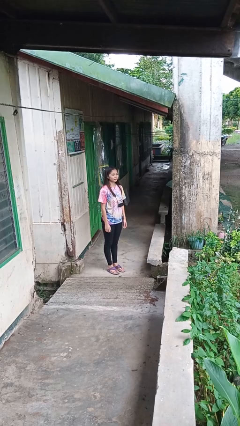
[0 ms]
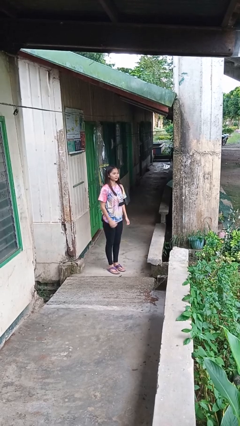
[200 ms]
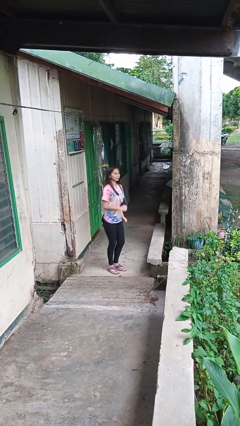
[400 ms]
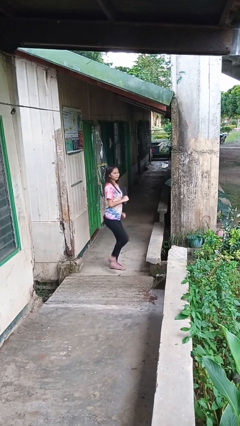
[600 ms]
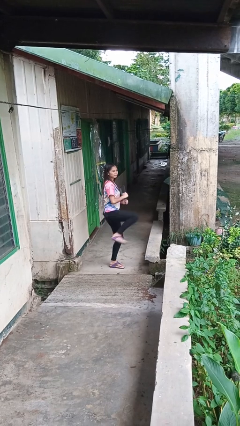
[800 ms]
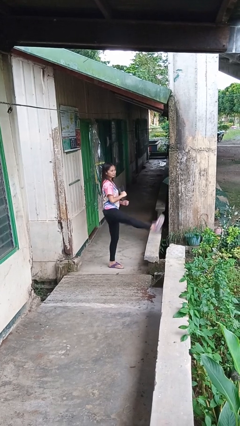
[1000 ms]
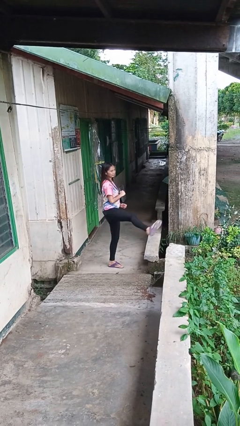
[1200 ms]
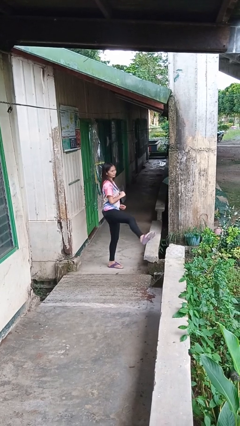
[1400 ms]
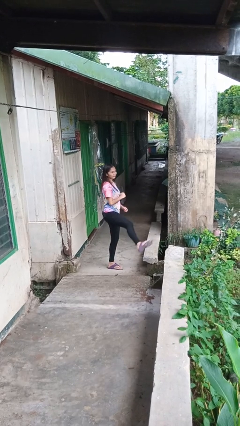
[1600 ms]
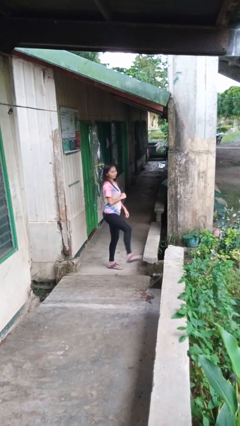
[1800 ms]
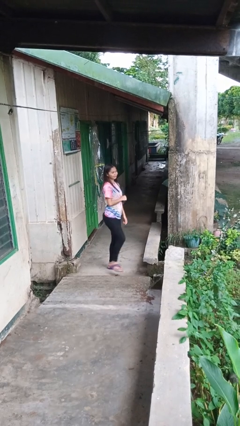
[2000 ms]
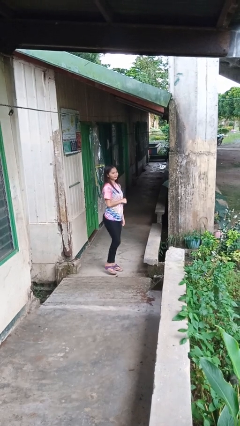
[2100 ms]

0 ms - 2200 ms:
person karate kicks

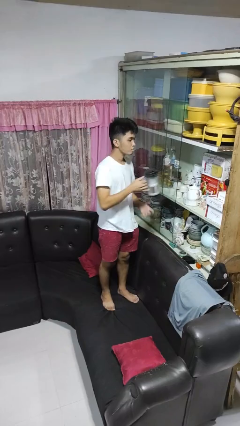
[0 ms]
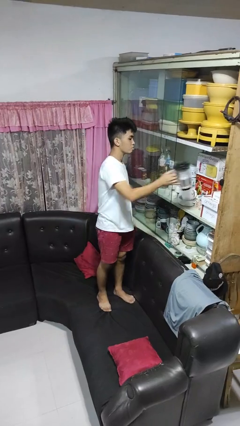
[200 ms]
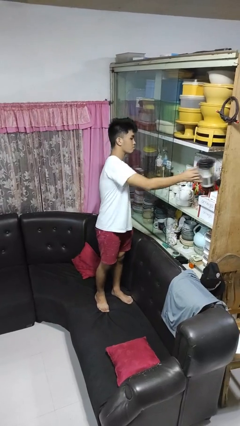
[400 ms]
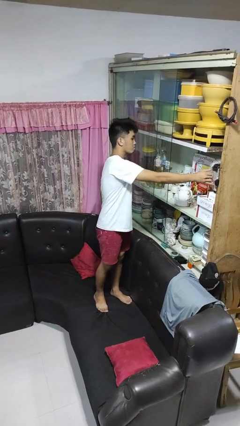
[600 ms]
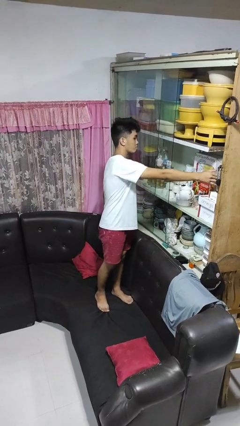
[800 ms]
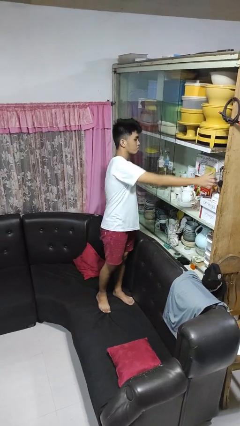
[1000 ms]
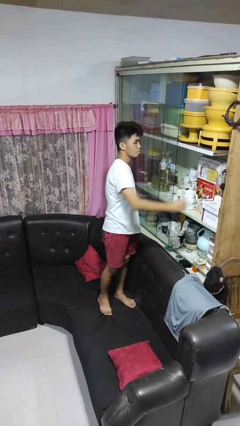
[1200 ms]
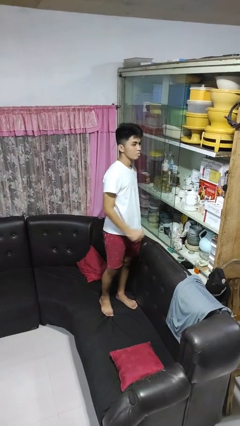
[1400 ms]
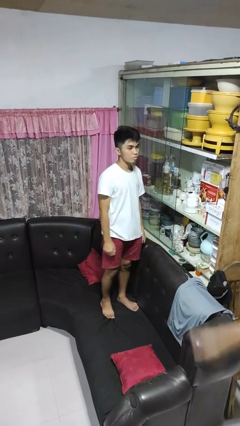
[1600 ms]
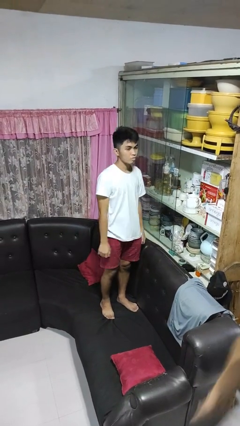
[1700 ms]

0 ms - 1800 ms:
person puts down object into cabinet

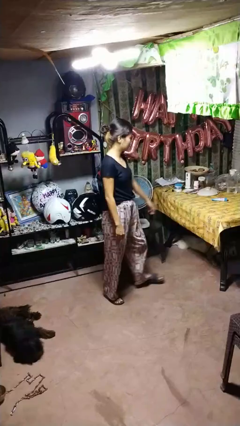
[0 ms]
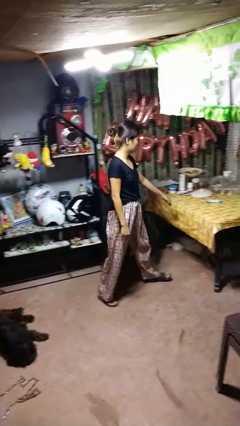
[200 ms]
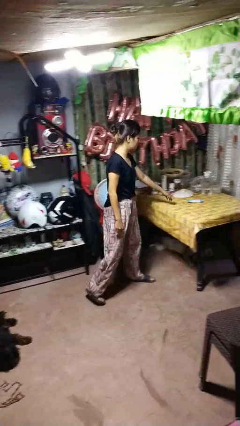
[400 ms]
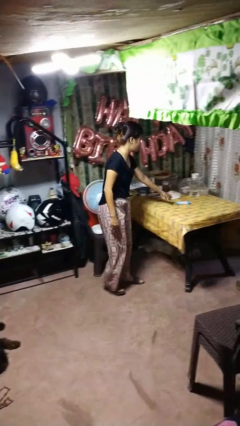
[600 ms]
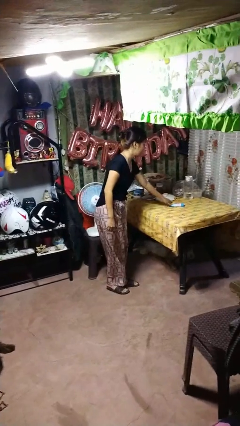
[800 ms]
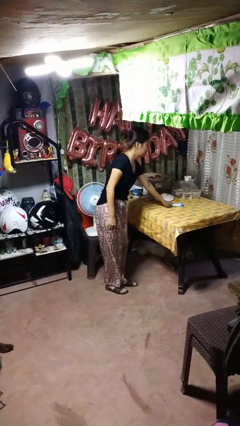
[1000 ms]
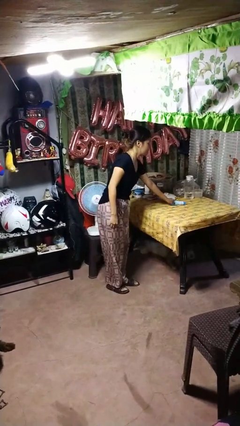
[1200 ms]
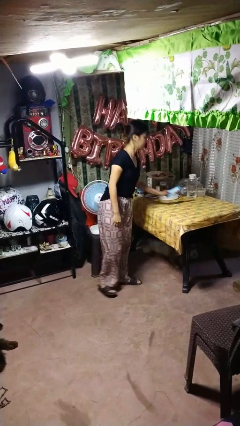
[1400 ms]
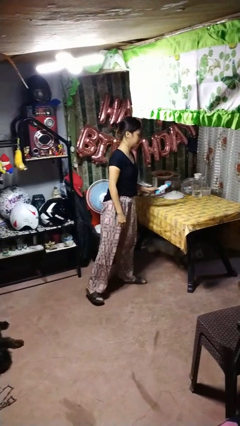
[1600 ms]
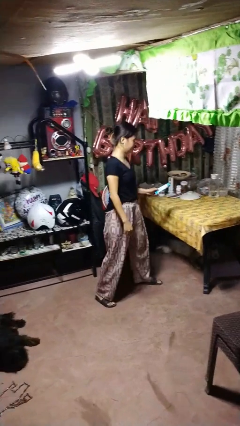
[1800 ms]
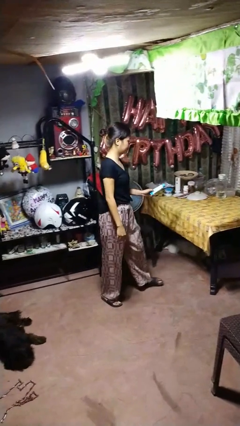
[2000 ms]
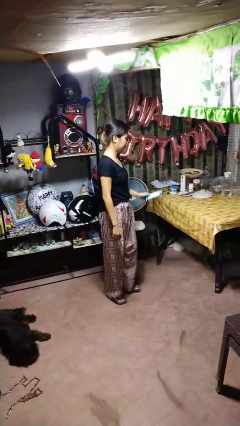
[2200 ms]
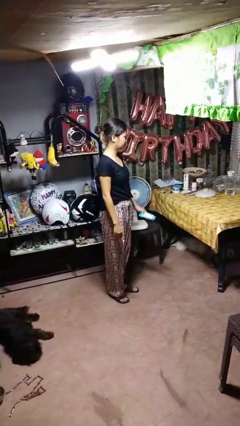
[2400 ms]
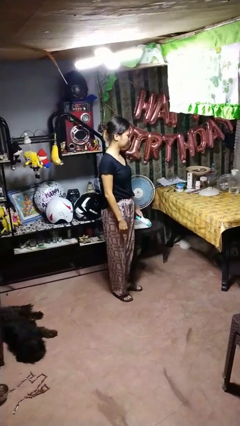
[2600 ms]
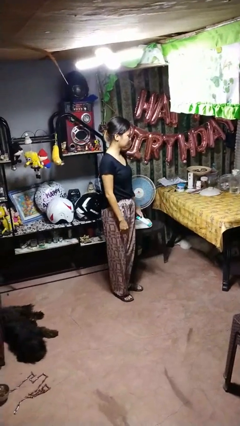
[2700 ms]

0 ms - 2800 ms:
person picks up object from table

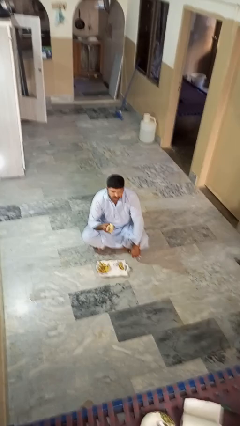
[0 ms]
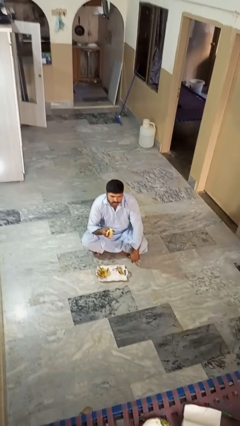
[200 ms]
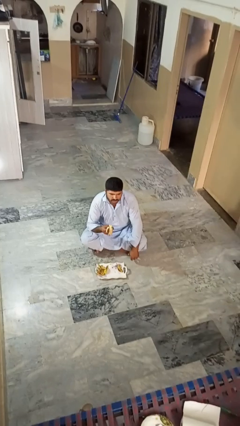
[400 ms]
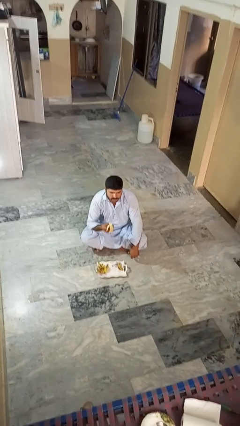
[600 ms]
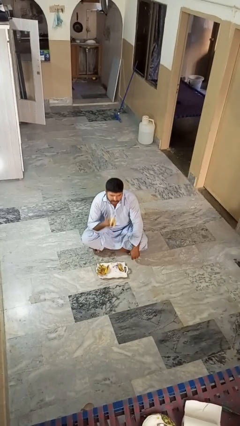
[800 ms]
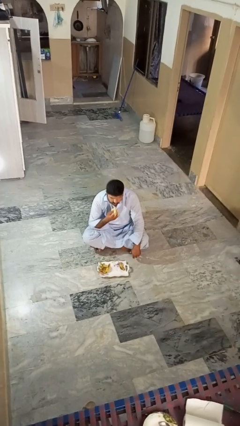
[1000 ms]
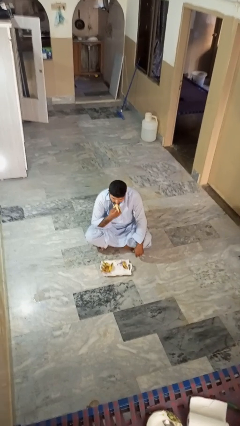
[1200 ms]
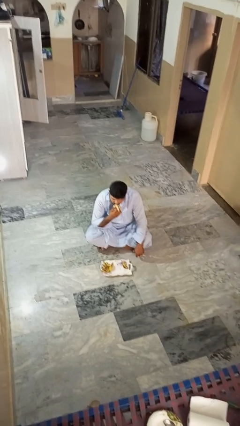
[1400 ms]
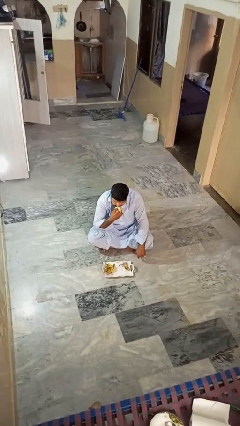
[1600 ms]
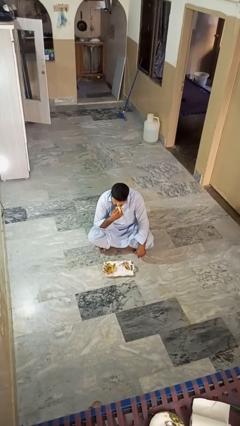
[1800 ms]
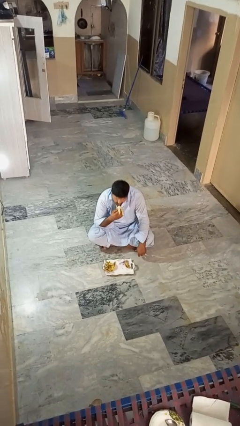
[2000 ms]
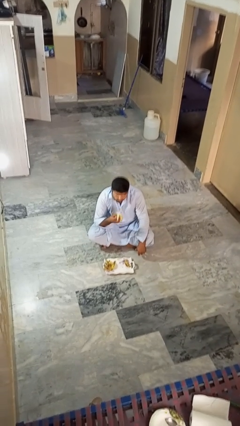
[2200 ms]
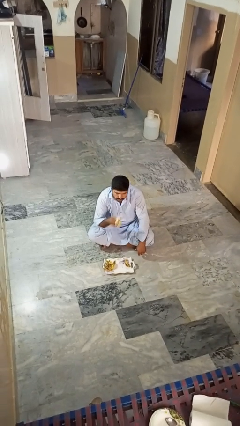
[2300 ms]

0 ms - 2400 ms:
person eats banana

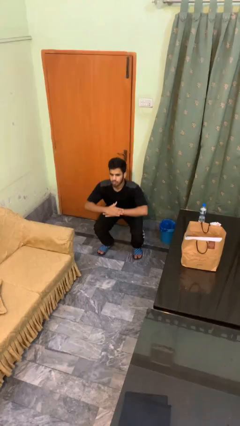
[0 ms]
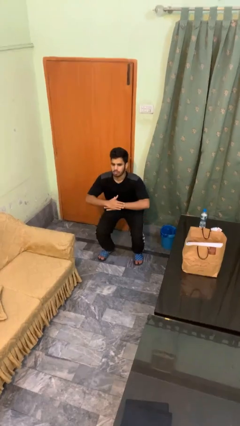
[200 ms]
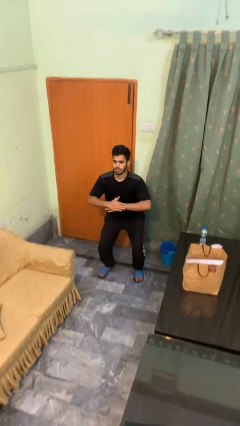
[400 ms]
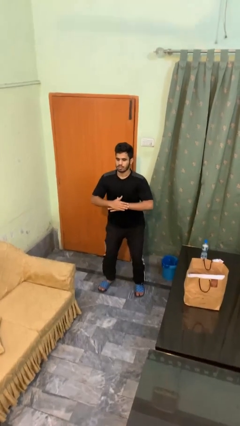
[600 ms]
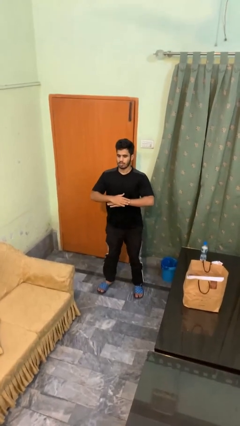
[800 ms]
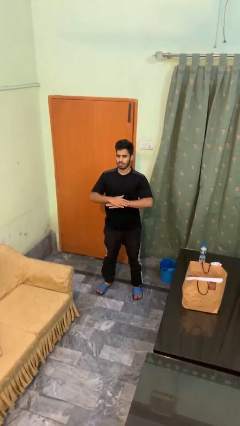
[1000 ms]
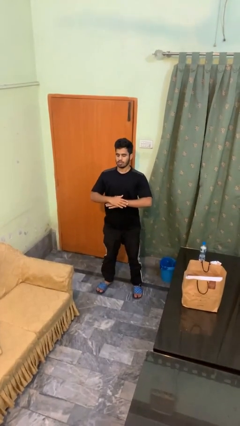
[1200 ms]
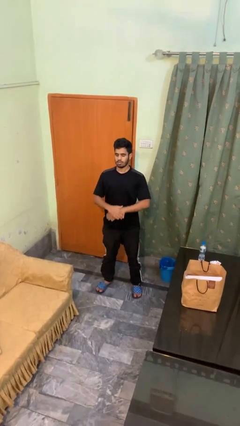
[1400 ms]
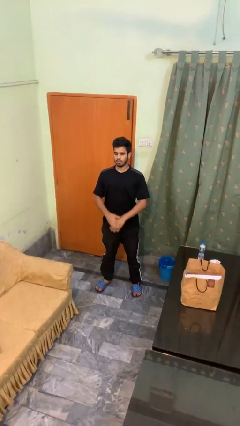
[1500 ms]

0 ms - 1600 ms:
person stands up

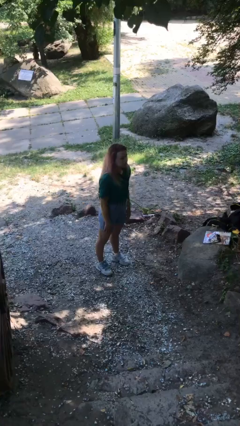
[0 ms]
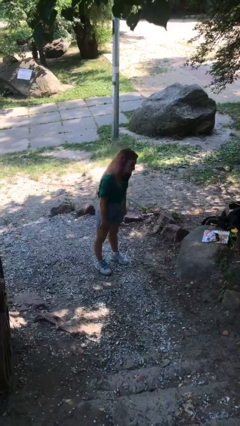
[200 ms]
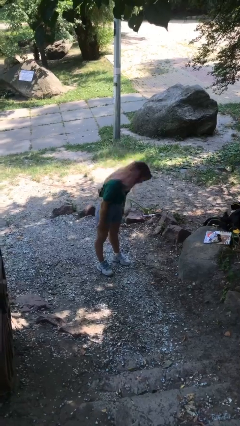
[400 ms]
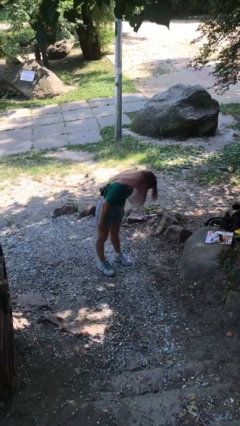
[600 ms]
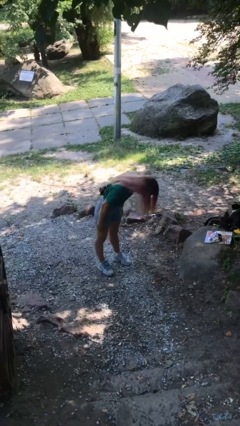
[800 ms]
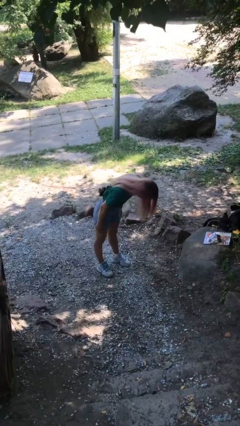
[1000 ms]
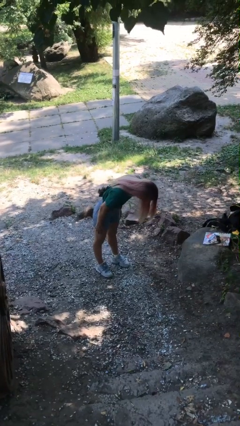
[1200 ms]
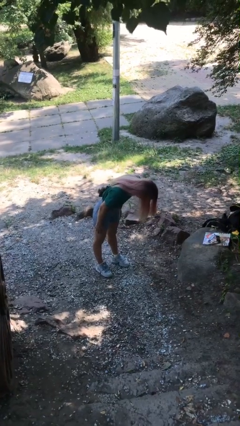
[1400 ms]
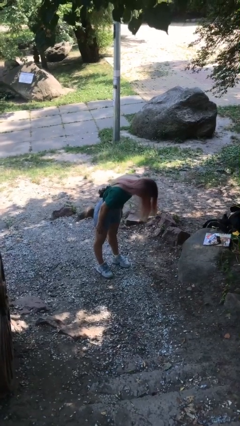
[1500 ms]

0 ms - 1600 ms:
person bows

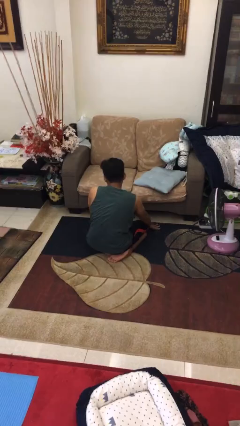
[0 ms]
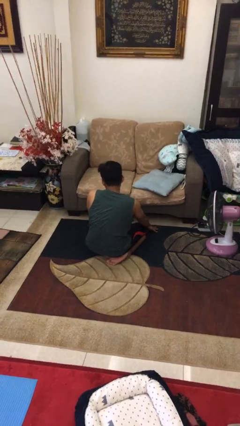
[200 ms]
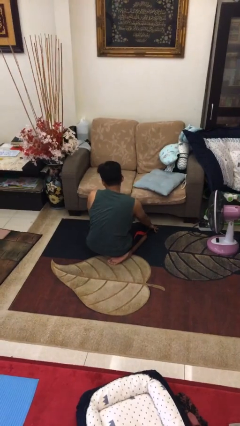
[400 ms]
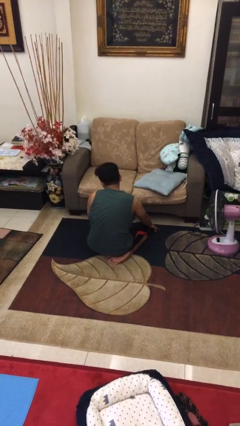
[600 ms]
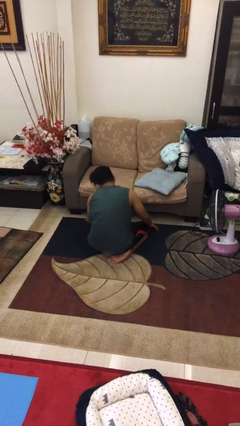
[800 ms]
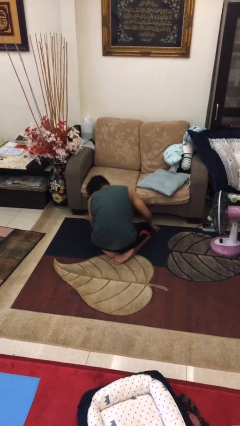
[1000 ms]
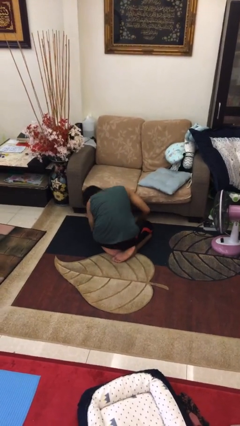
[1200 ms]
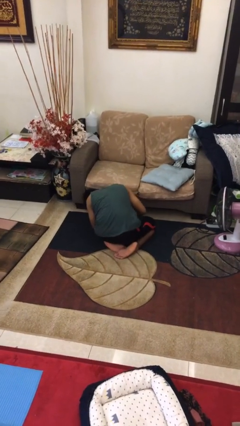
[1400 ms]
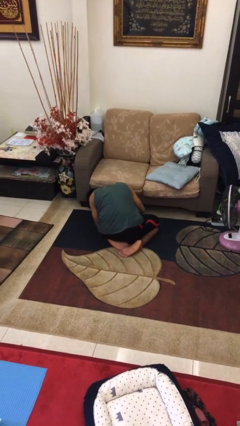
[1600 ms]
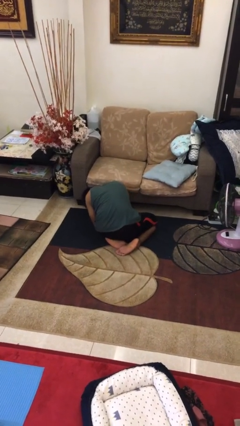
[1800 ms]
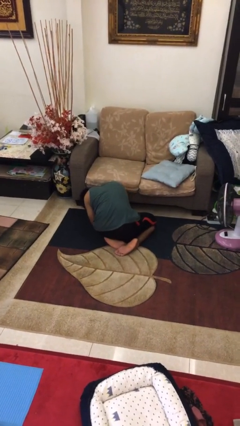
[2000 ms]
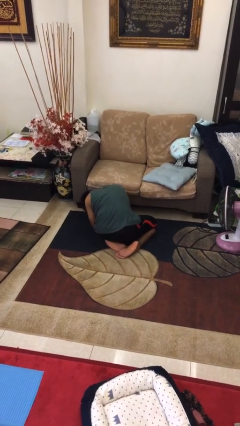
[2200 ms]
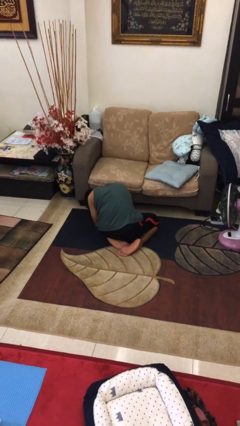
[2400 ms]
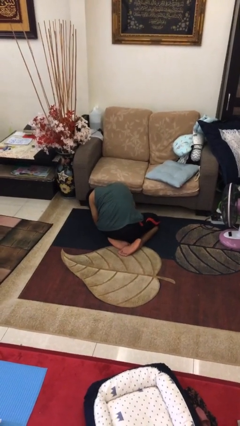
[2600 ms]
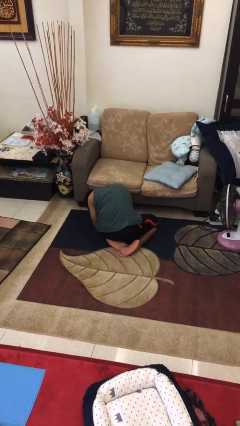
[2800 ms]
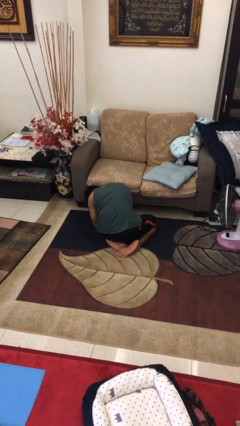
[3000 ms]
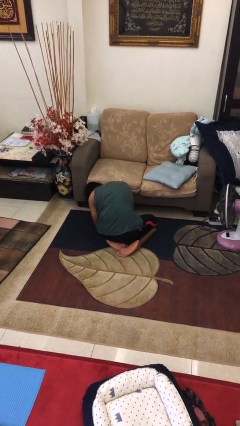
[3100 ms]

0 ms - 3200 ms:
person searches under couch

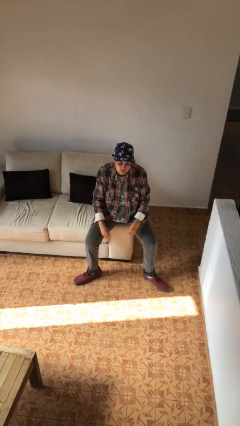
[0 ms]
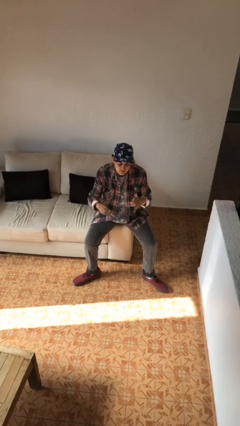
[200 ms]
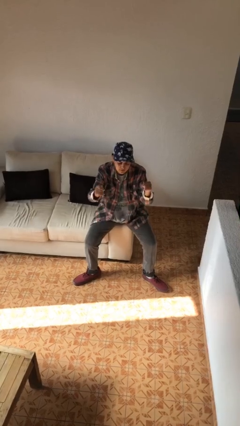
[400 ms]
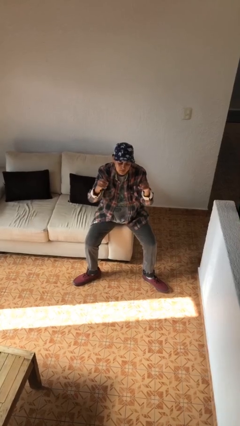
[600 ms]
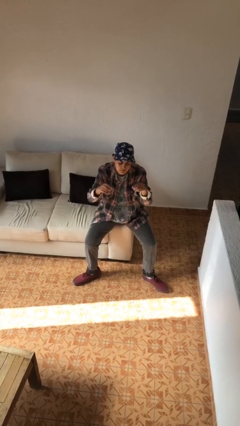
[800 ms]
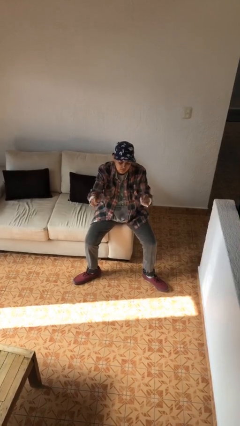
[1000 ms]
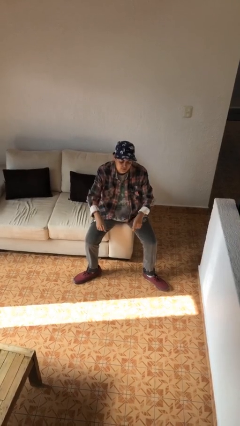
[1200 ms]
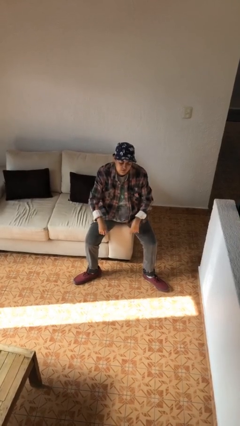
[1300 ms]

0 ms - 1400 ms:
person snaps fingers
